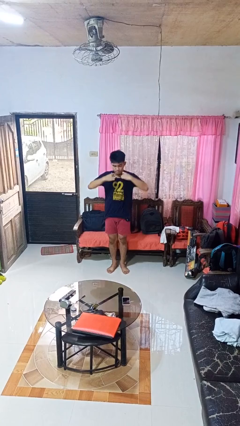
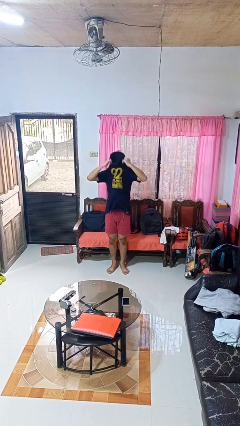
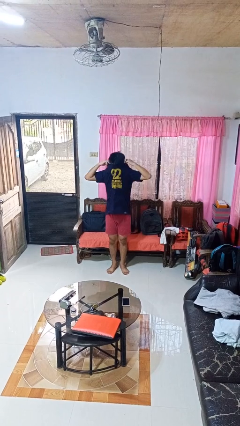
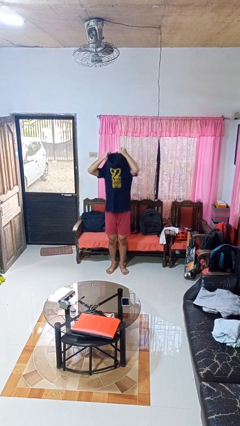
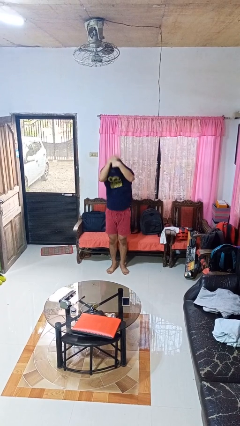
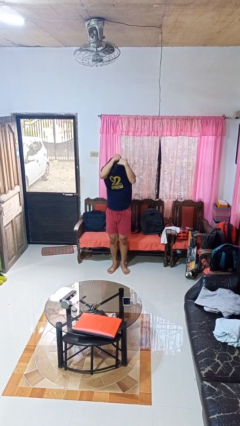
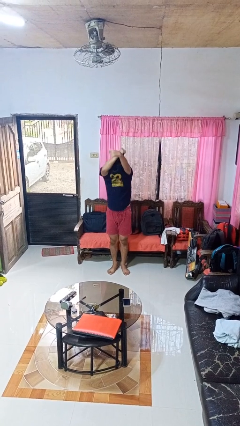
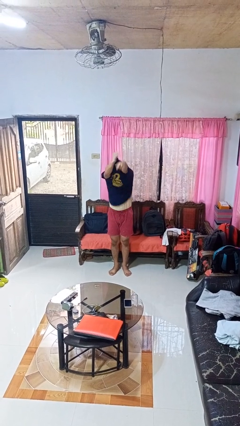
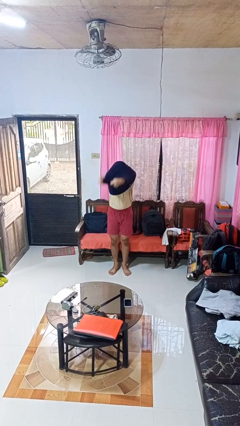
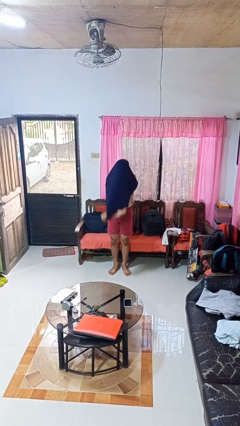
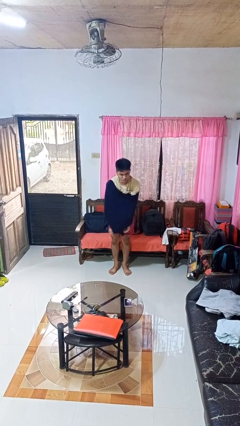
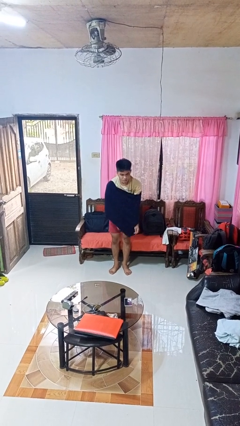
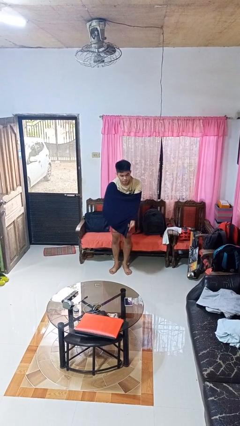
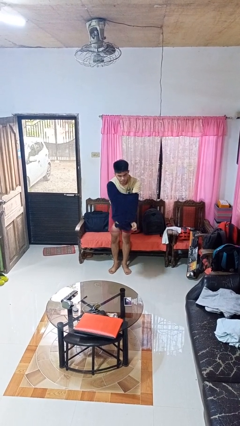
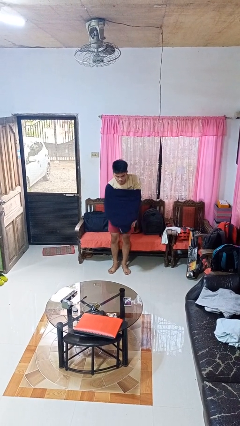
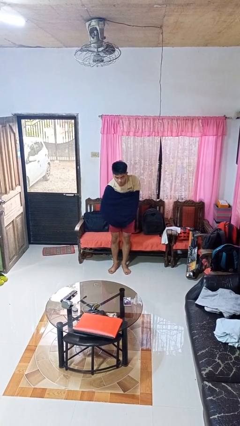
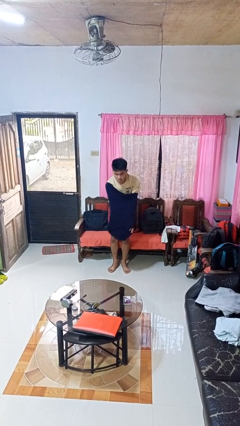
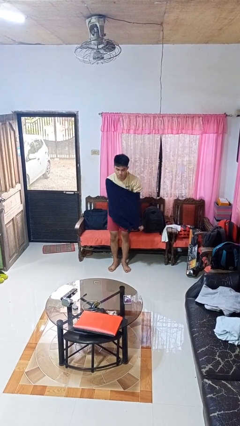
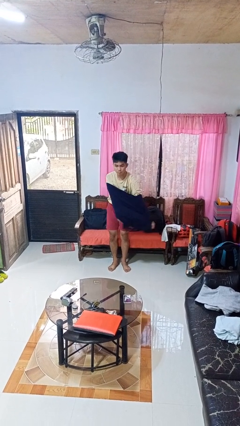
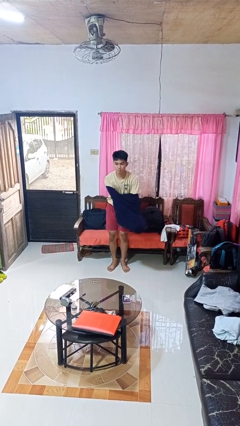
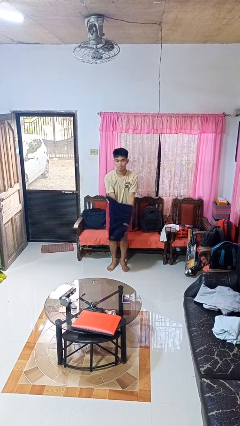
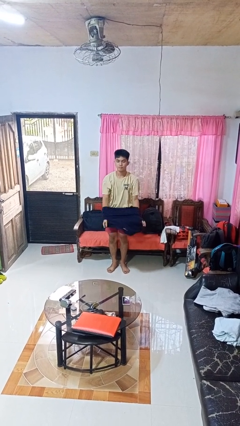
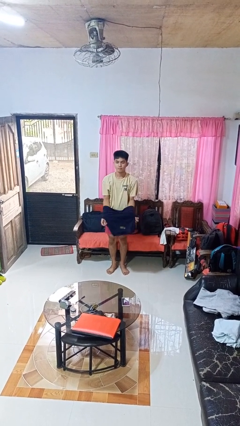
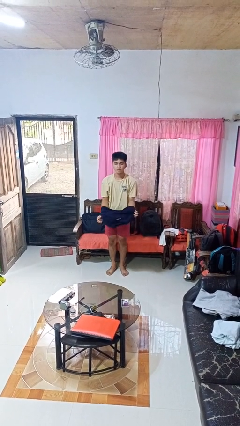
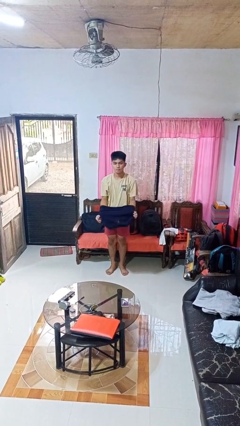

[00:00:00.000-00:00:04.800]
person takes off shirt

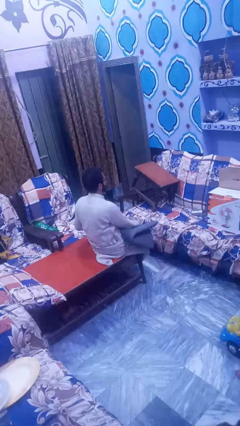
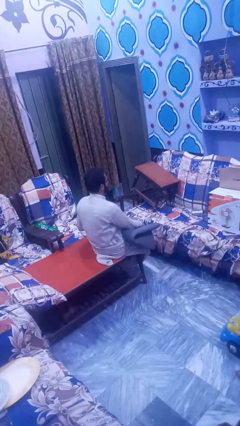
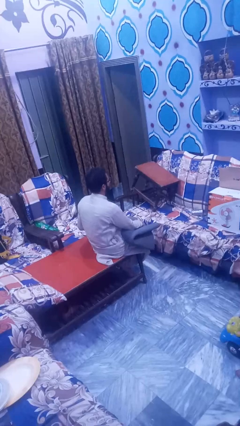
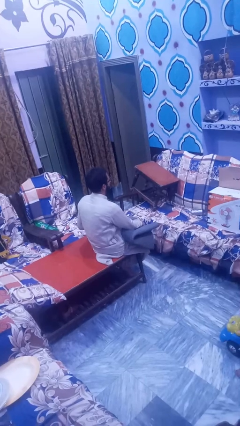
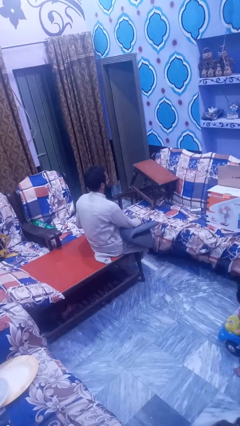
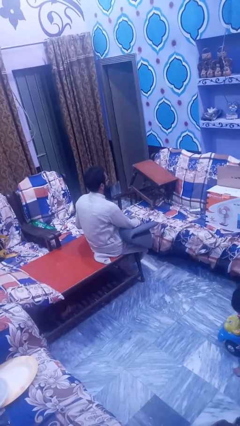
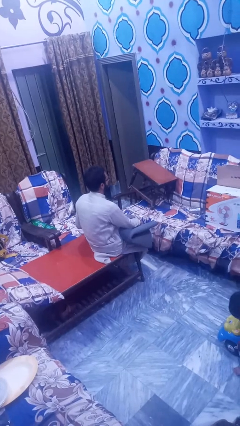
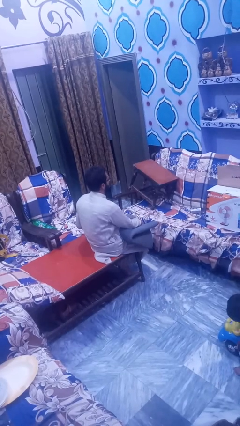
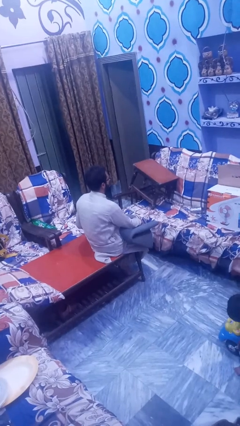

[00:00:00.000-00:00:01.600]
person folds blanket

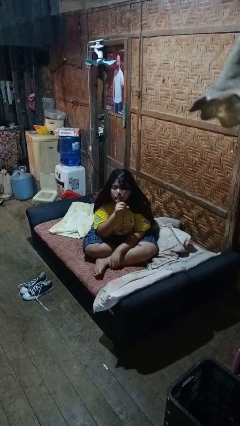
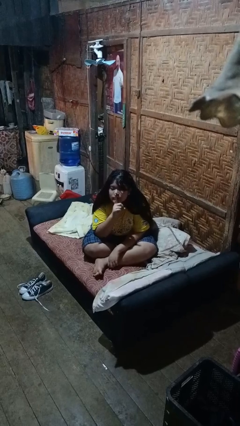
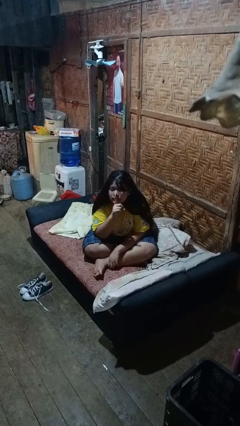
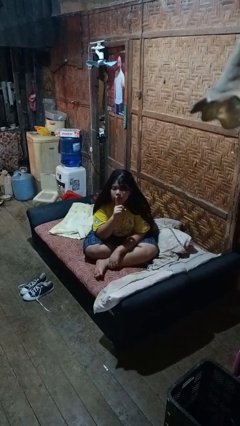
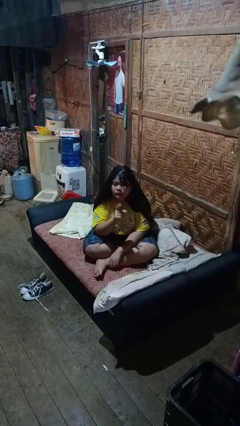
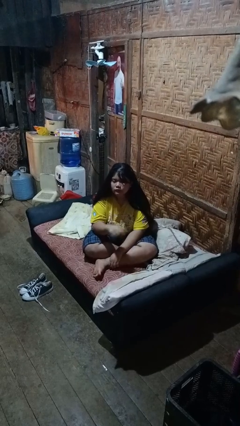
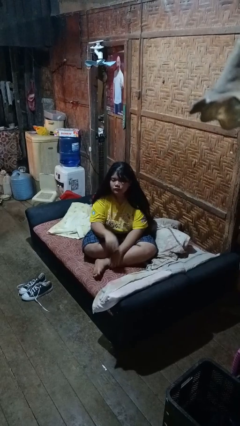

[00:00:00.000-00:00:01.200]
person gestures be quiet

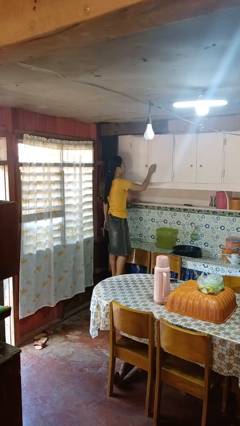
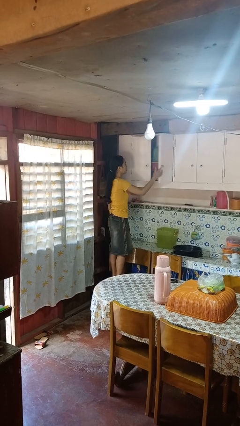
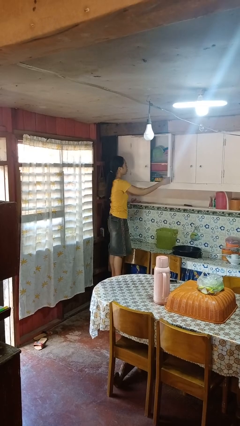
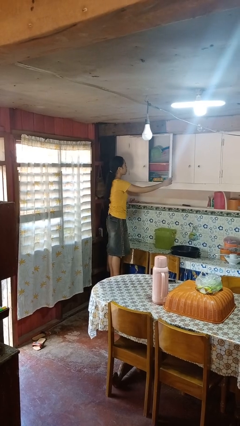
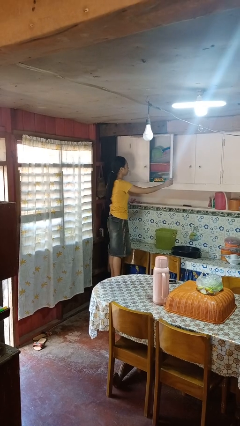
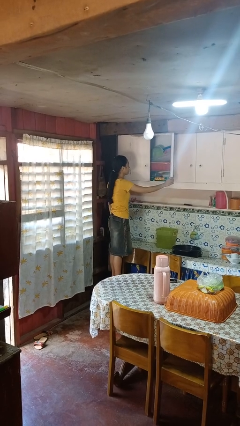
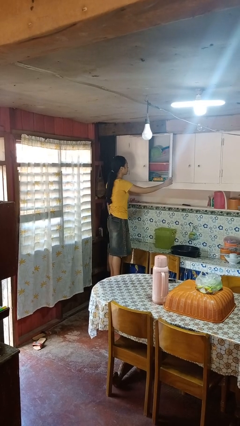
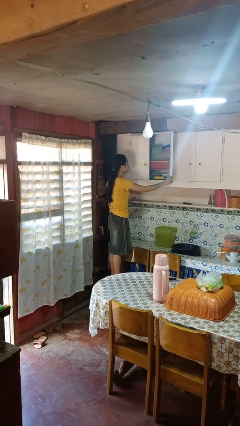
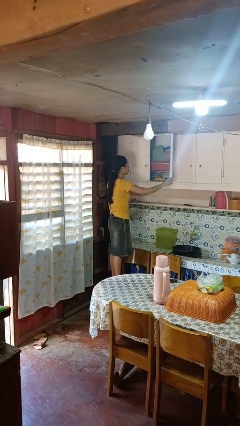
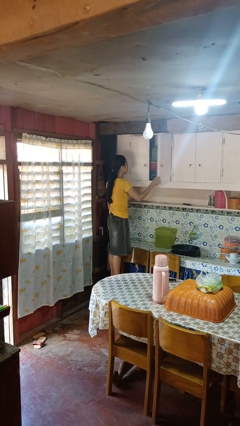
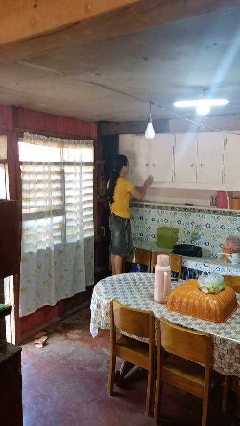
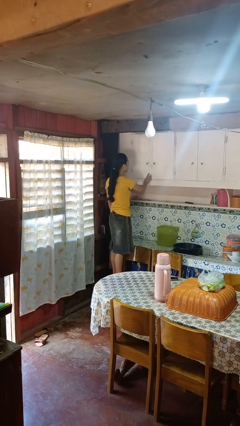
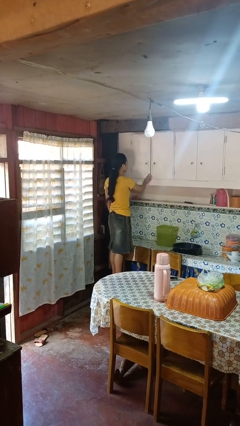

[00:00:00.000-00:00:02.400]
person opens cabinet

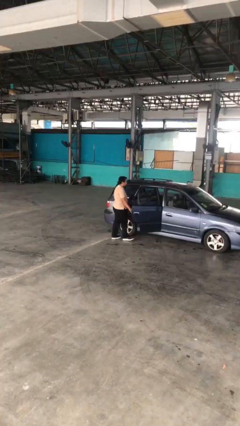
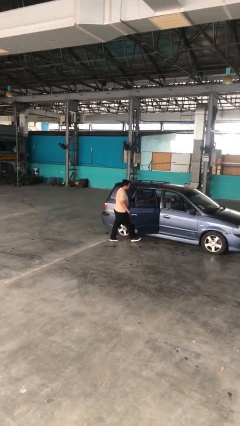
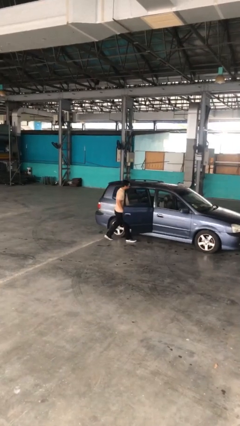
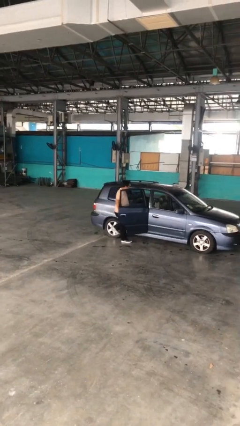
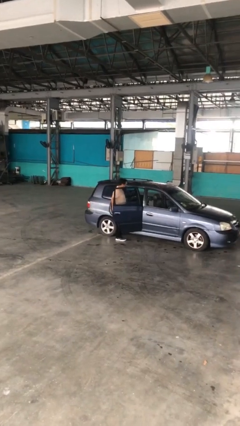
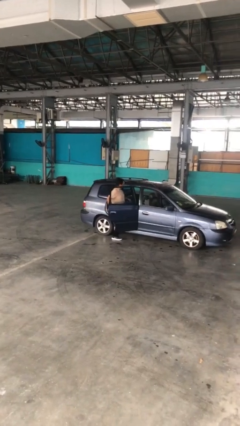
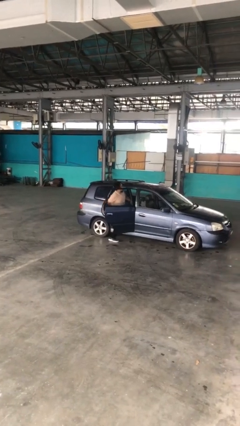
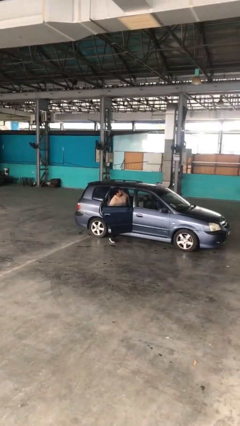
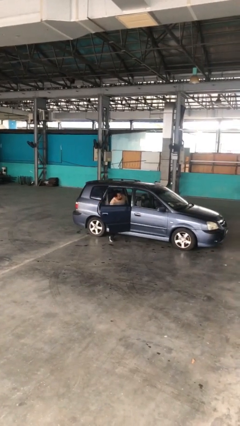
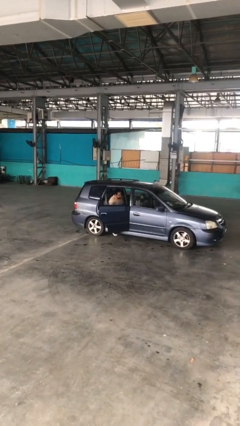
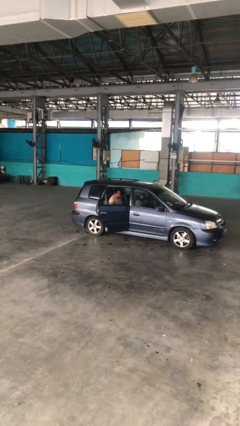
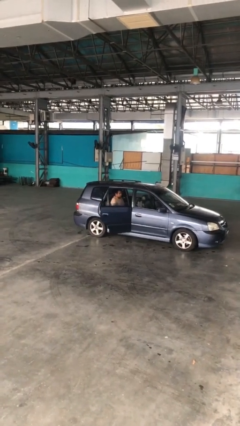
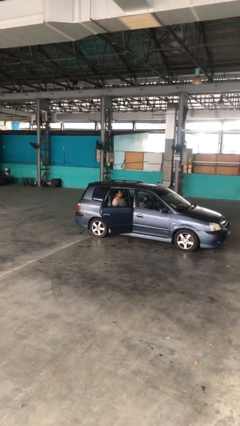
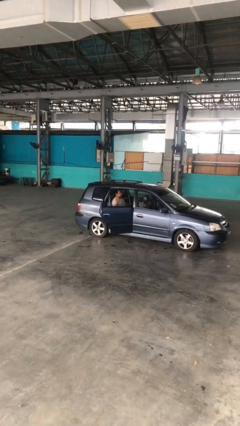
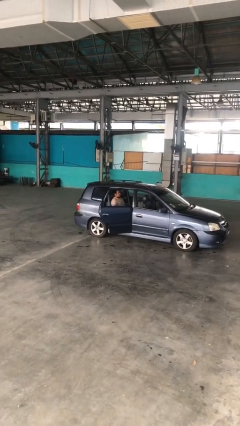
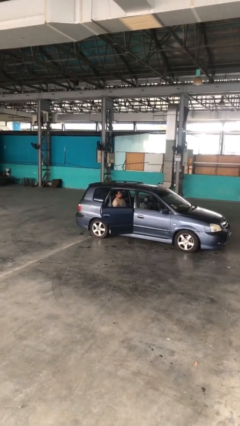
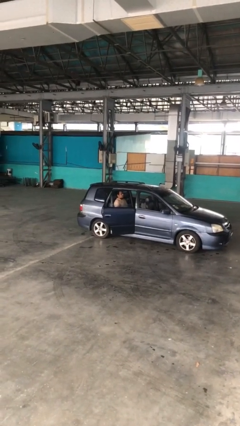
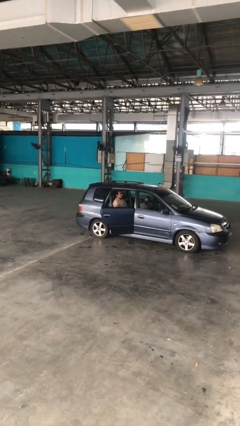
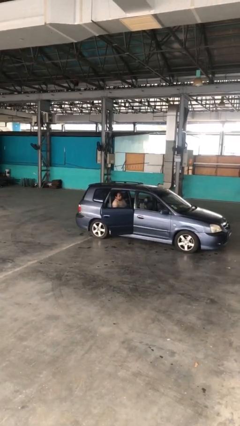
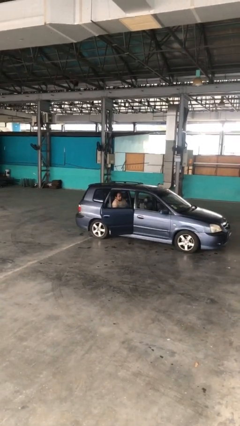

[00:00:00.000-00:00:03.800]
person enters car

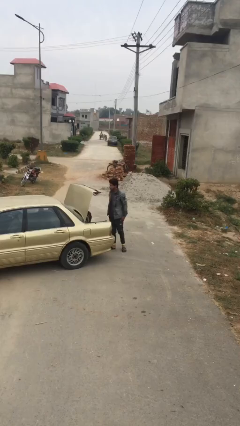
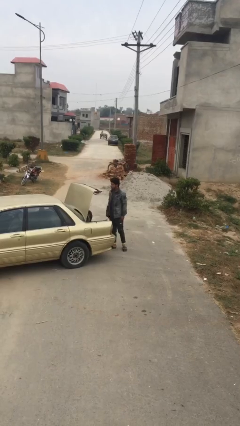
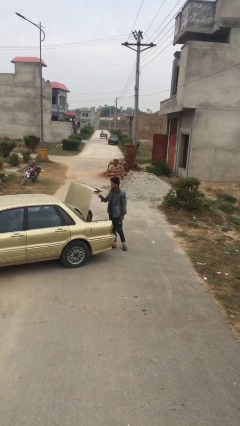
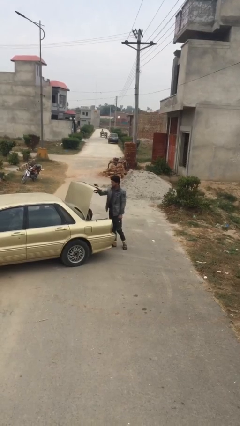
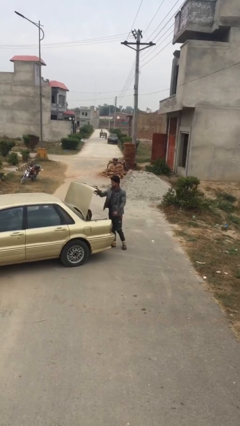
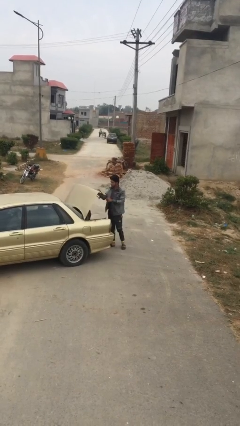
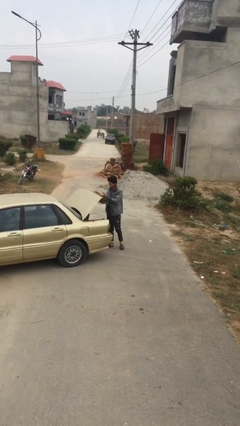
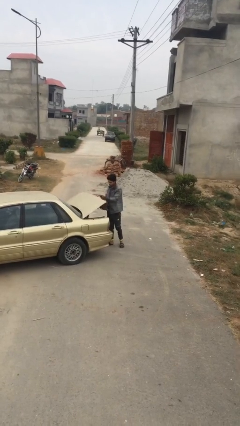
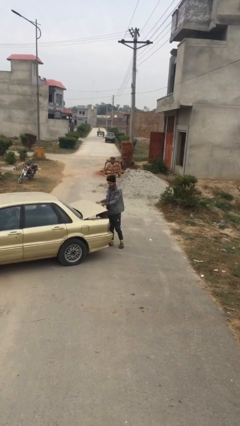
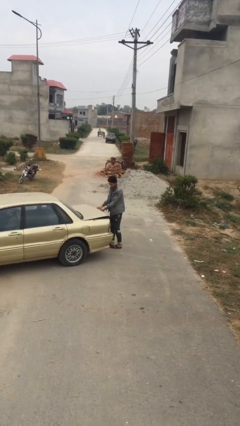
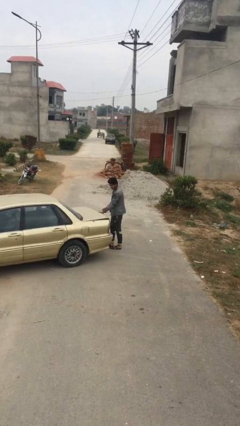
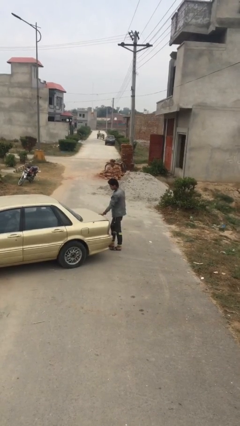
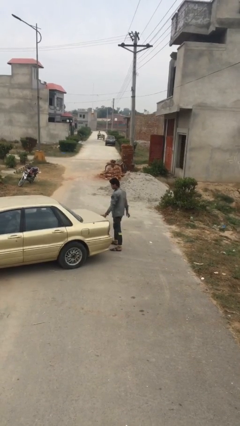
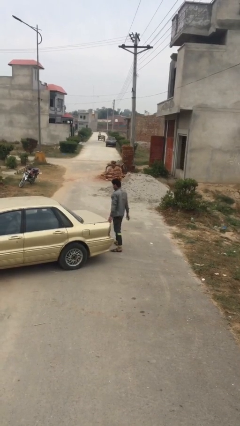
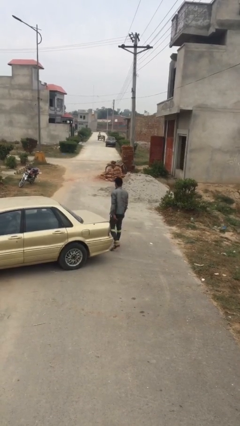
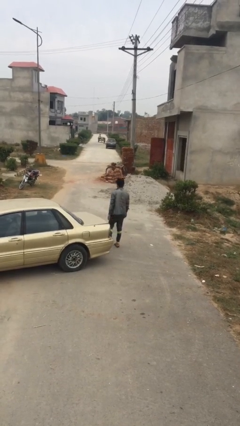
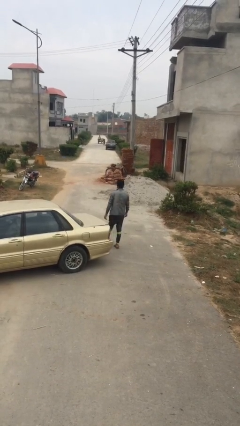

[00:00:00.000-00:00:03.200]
person closes car trunk

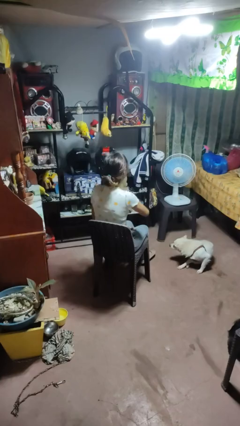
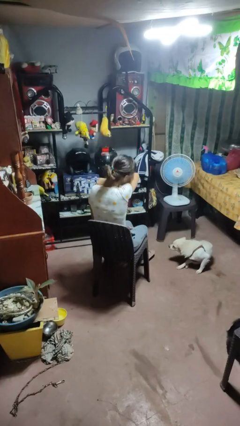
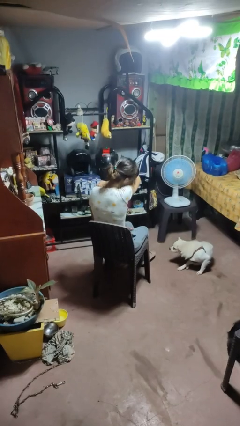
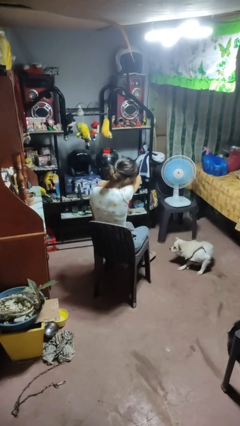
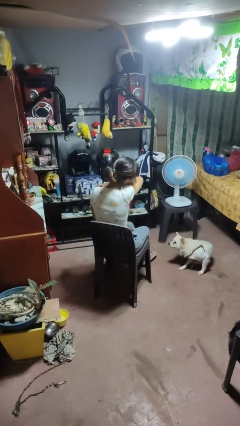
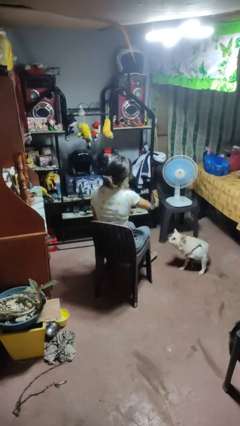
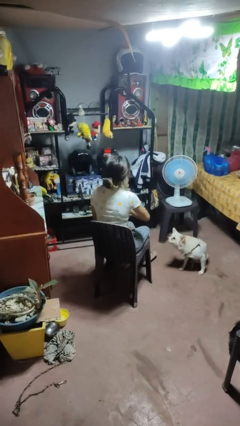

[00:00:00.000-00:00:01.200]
person sneezes into arm
